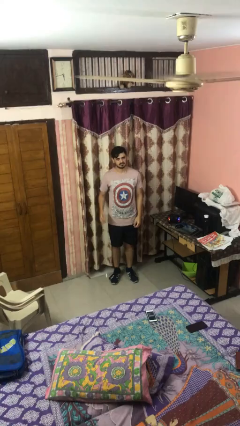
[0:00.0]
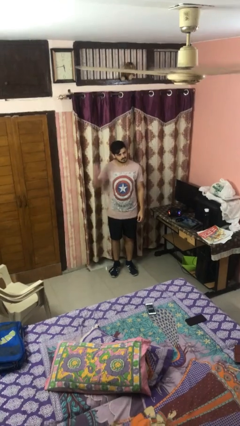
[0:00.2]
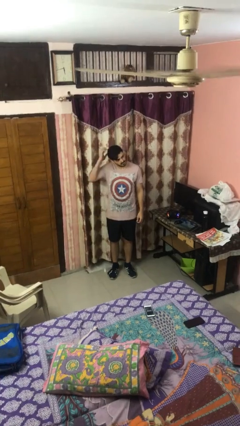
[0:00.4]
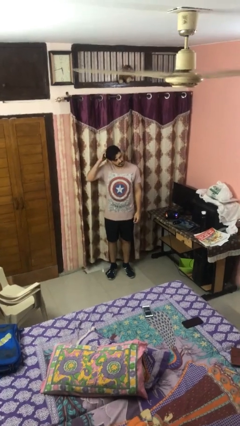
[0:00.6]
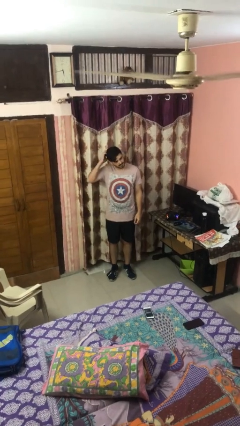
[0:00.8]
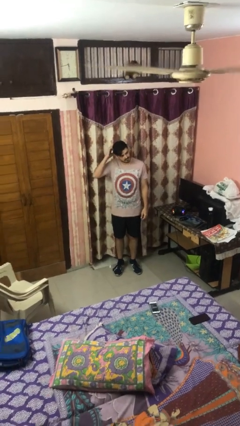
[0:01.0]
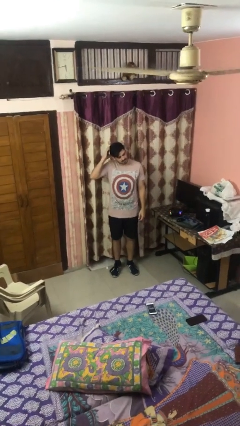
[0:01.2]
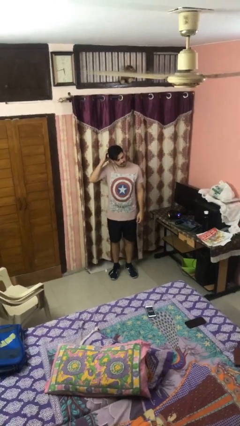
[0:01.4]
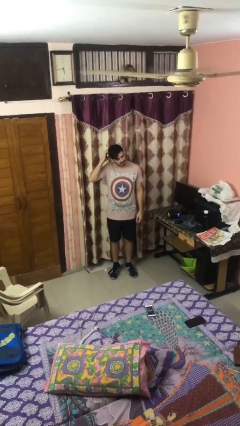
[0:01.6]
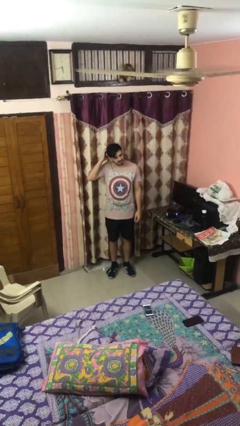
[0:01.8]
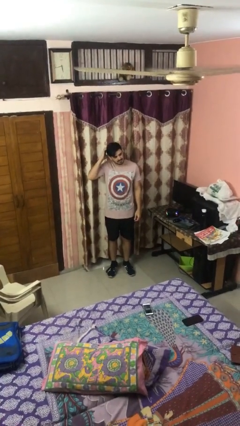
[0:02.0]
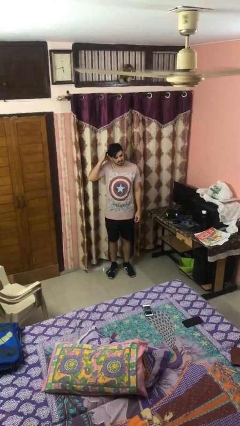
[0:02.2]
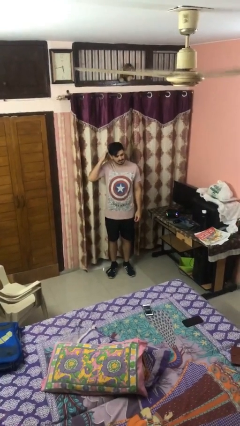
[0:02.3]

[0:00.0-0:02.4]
person scratches face

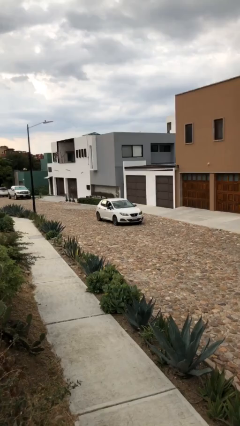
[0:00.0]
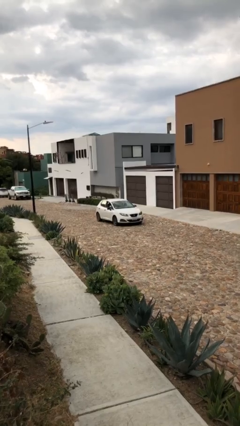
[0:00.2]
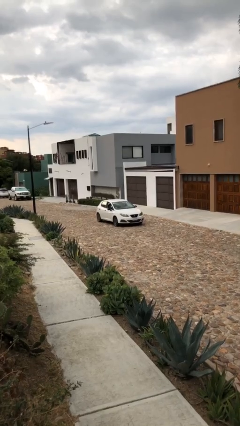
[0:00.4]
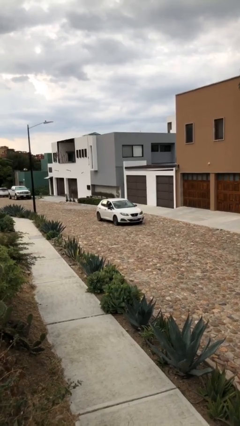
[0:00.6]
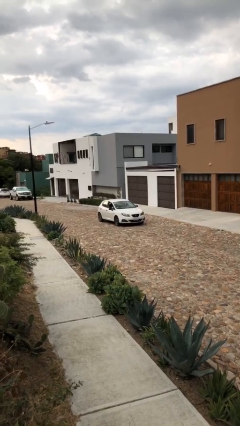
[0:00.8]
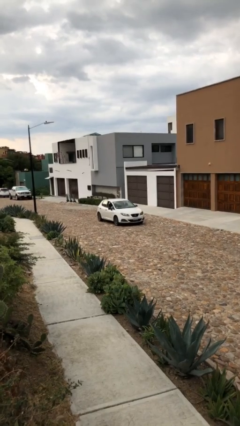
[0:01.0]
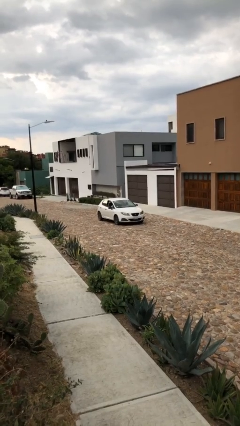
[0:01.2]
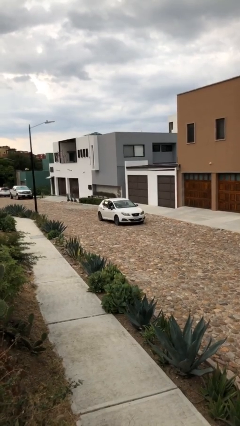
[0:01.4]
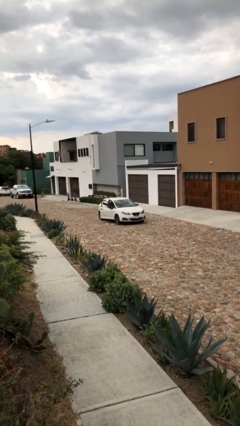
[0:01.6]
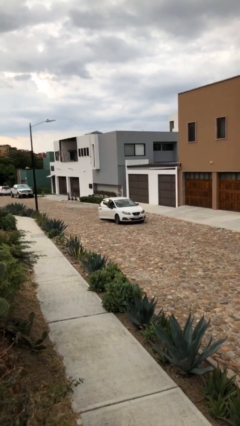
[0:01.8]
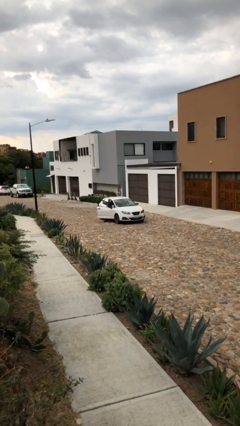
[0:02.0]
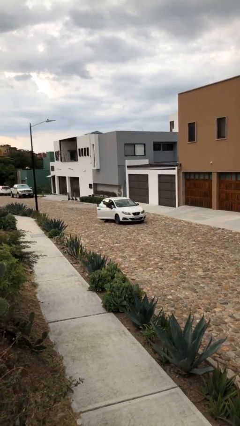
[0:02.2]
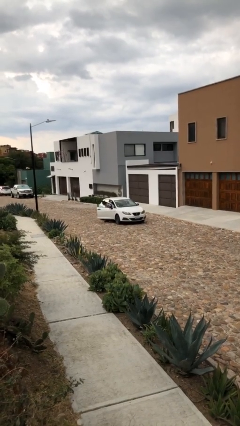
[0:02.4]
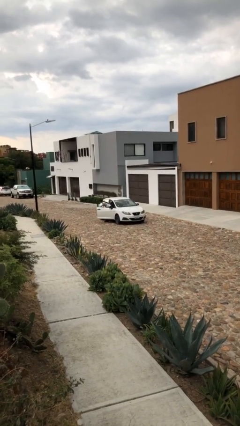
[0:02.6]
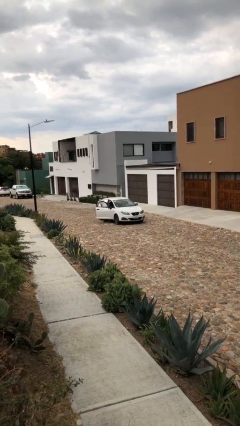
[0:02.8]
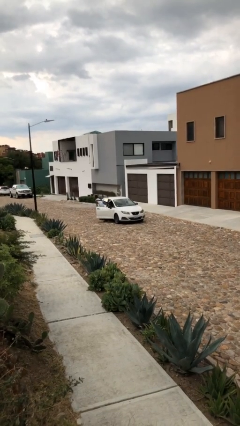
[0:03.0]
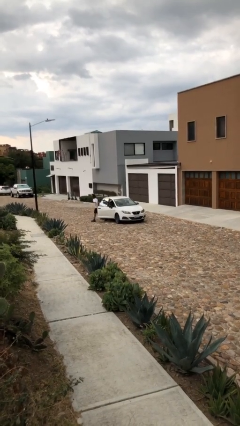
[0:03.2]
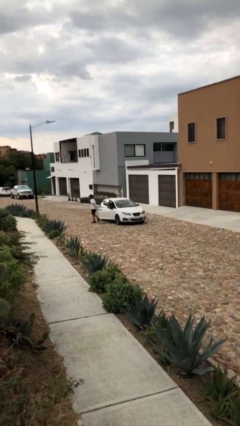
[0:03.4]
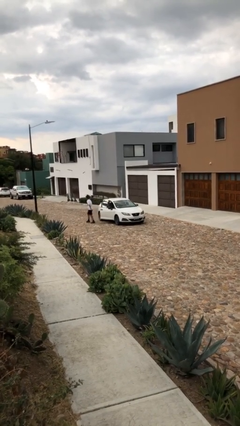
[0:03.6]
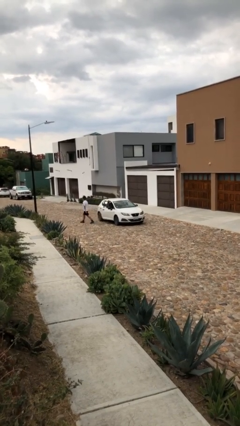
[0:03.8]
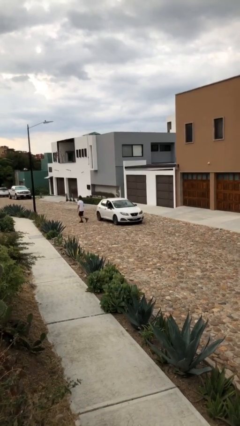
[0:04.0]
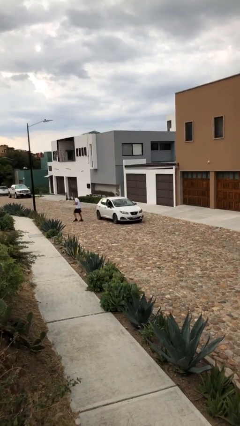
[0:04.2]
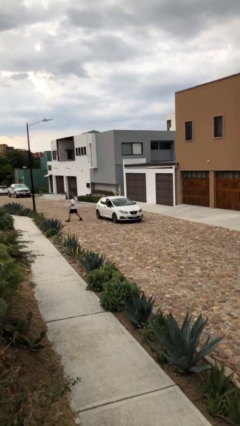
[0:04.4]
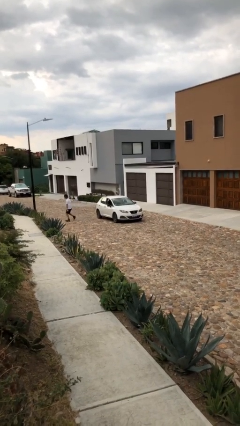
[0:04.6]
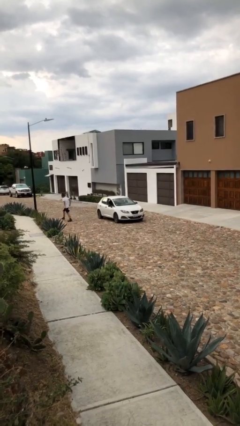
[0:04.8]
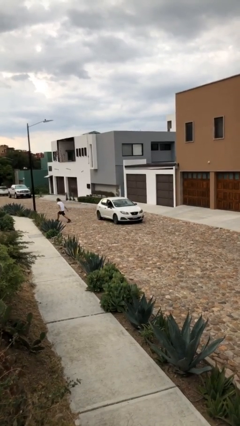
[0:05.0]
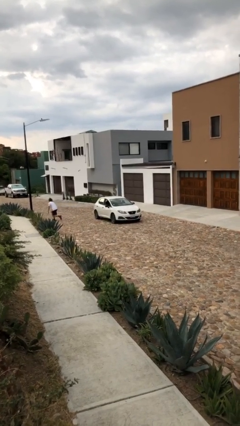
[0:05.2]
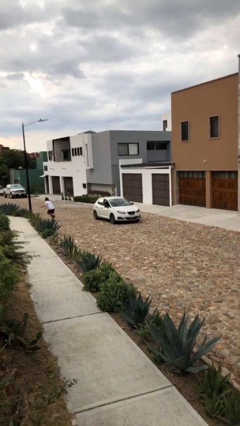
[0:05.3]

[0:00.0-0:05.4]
car drops off person

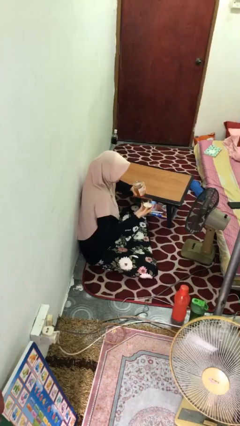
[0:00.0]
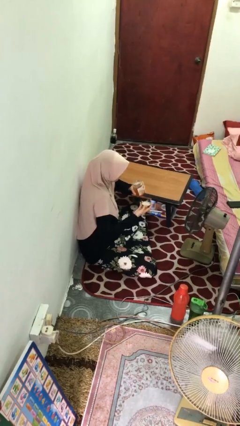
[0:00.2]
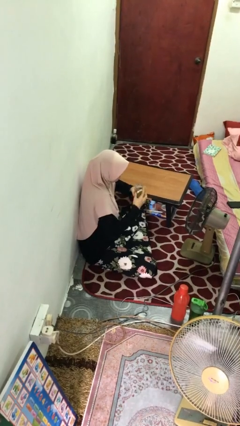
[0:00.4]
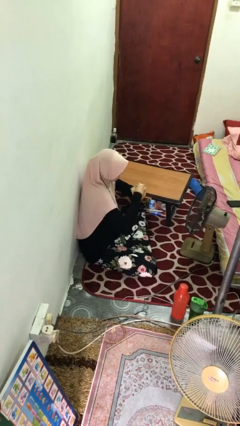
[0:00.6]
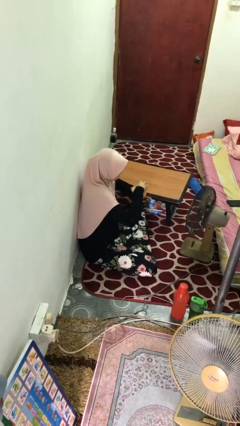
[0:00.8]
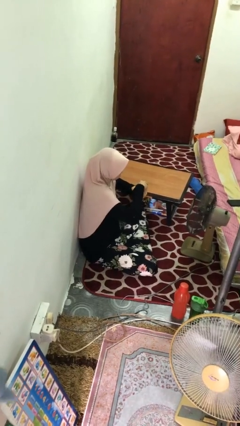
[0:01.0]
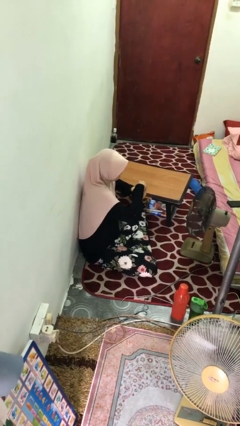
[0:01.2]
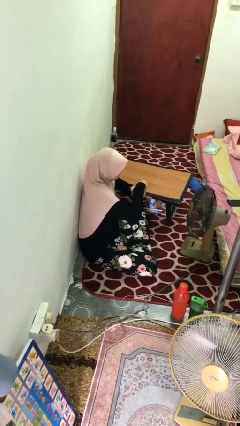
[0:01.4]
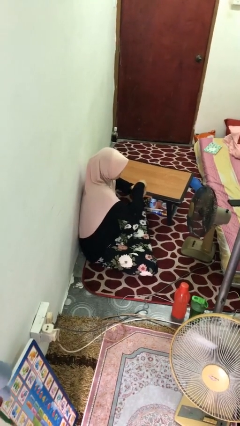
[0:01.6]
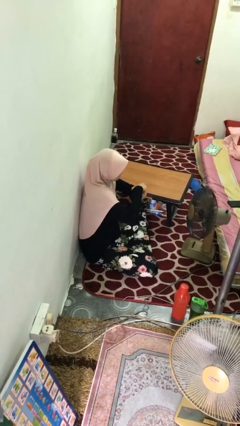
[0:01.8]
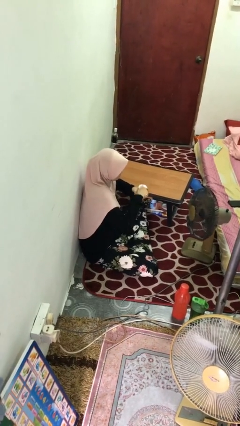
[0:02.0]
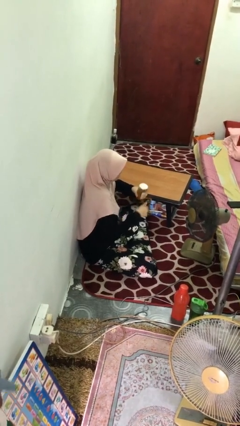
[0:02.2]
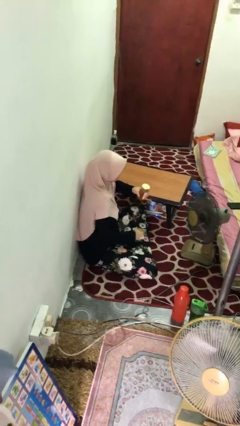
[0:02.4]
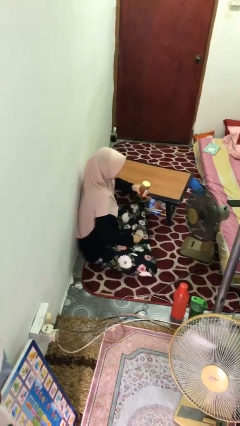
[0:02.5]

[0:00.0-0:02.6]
person closes jar

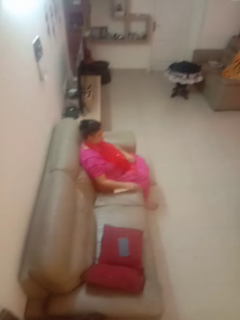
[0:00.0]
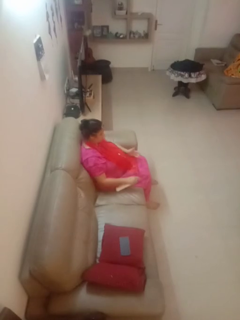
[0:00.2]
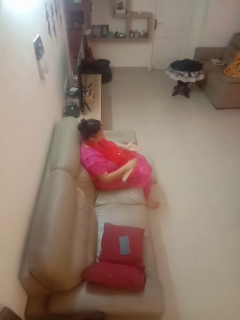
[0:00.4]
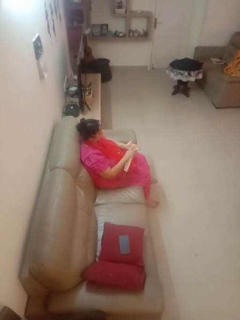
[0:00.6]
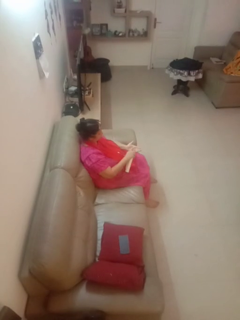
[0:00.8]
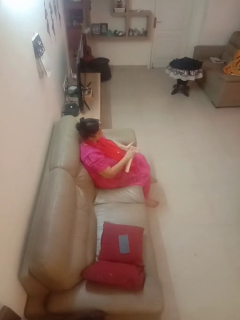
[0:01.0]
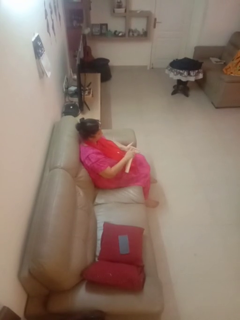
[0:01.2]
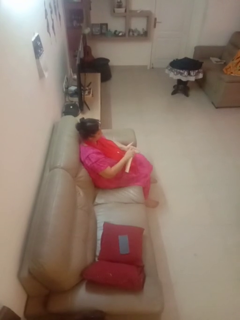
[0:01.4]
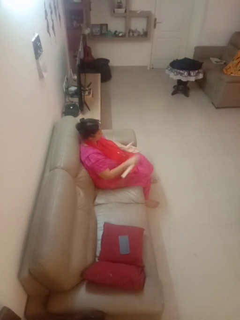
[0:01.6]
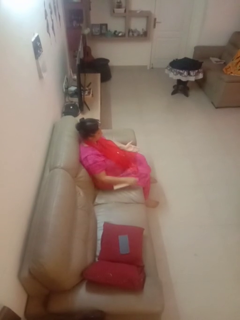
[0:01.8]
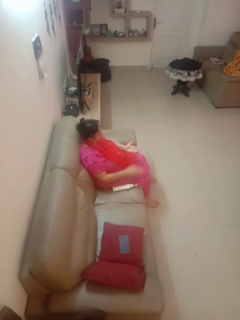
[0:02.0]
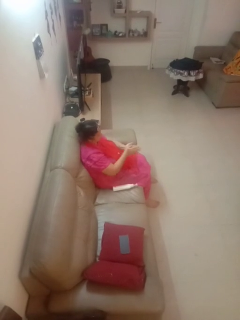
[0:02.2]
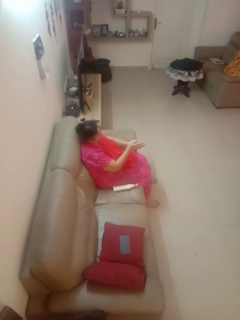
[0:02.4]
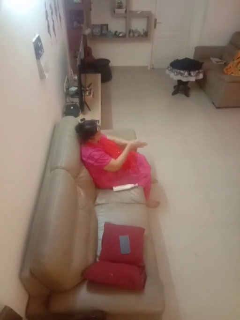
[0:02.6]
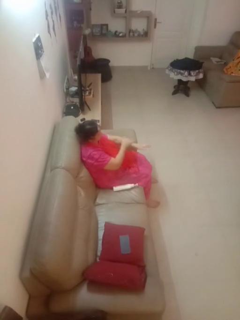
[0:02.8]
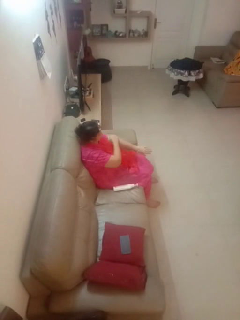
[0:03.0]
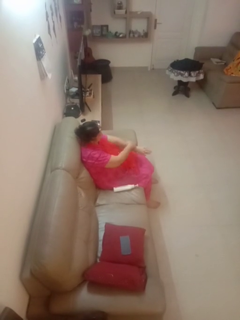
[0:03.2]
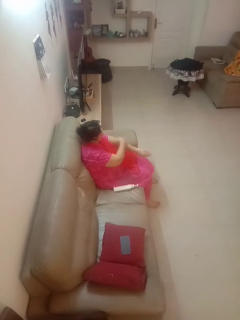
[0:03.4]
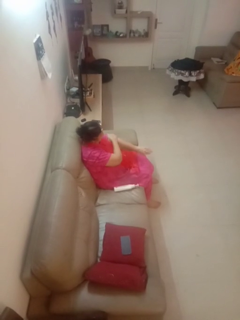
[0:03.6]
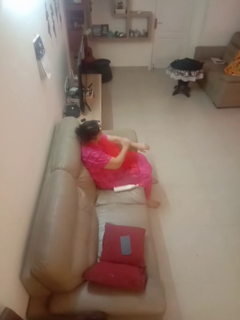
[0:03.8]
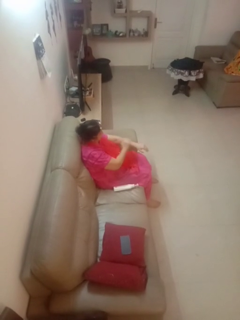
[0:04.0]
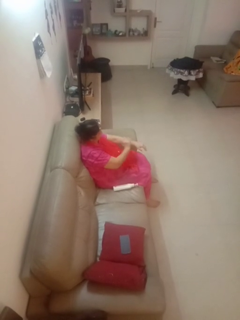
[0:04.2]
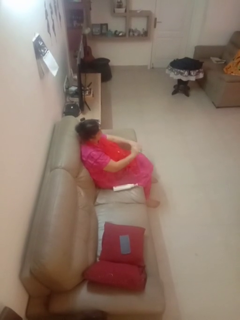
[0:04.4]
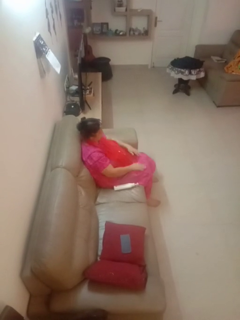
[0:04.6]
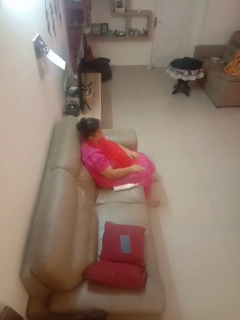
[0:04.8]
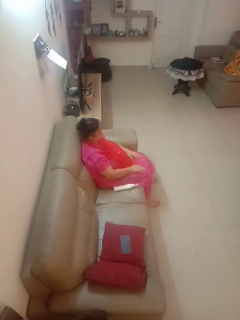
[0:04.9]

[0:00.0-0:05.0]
person applies sunscreen

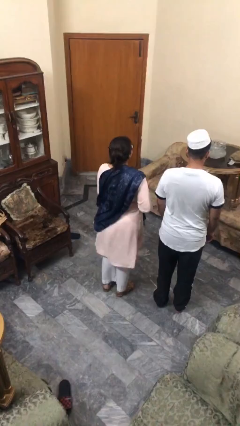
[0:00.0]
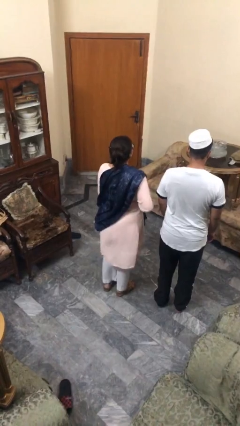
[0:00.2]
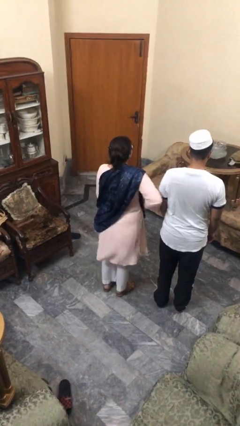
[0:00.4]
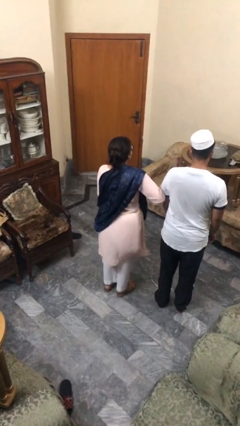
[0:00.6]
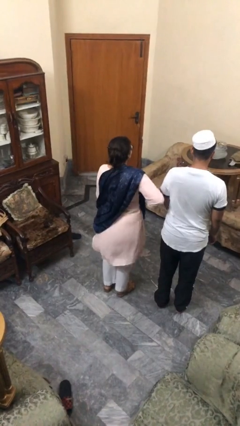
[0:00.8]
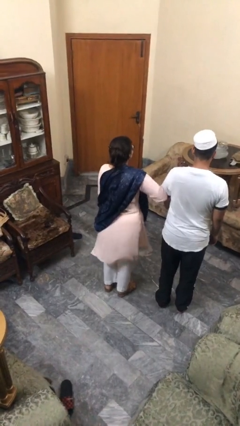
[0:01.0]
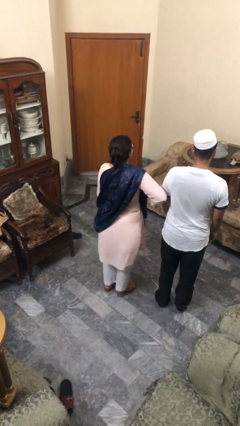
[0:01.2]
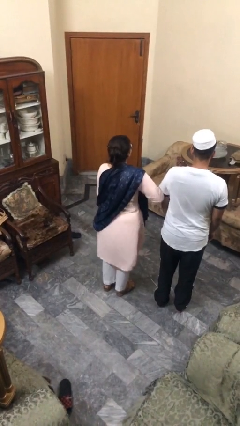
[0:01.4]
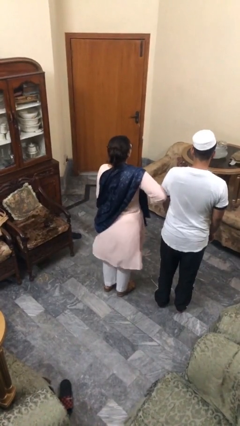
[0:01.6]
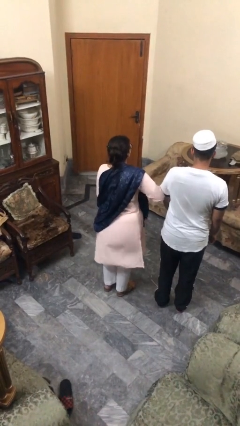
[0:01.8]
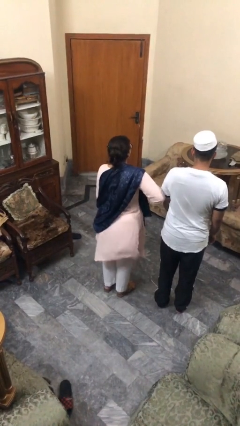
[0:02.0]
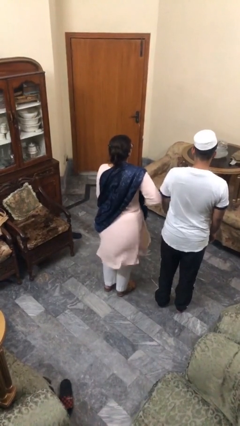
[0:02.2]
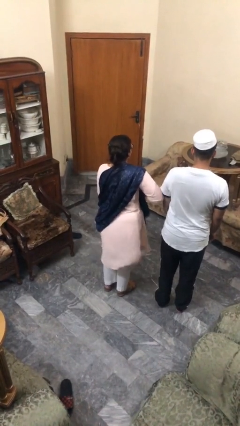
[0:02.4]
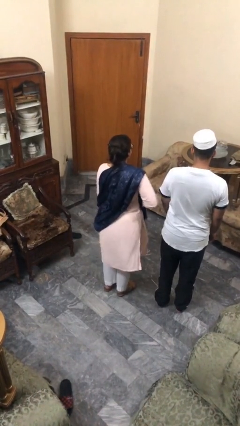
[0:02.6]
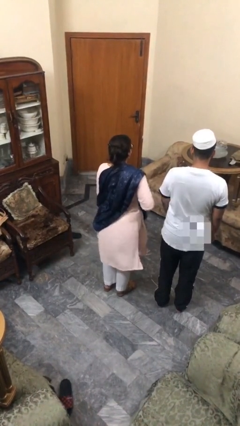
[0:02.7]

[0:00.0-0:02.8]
person nudges person with elbow

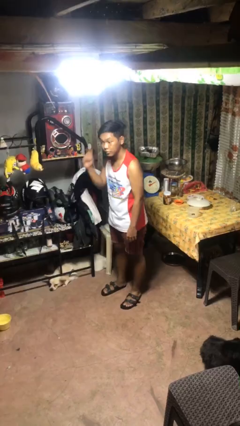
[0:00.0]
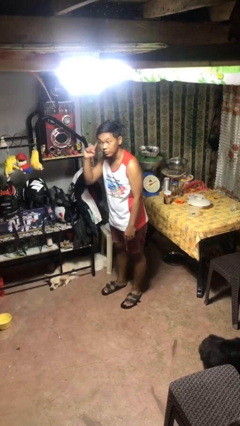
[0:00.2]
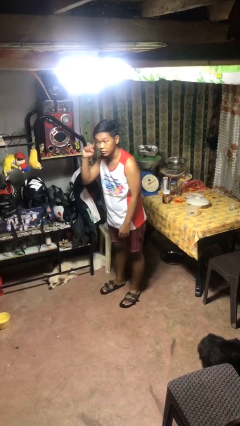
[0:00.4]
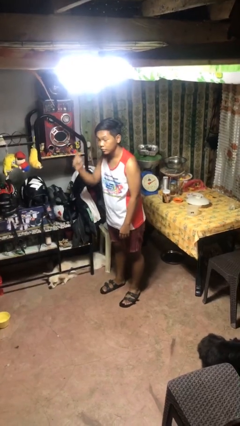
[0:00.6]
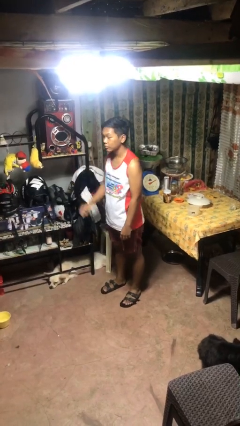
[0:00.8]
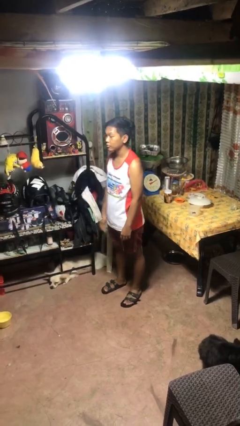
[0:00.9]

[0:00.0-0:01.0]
person gestures listen closely
